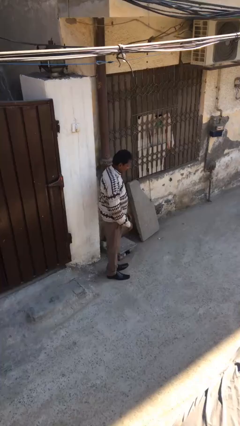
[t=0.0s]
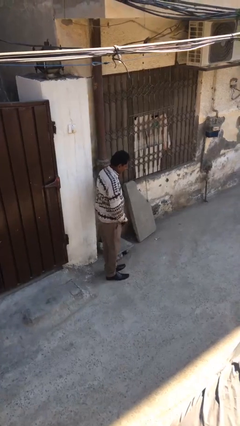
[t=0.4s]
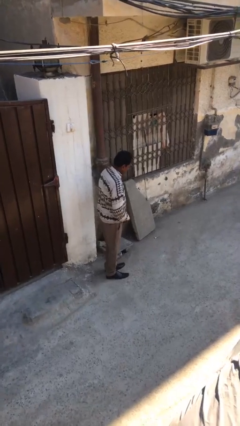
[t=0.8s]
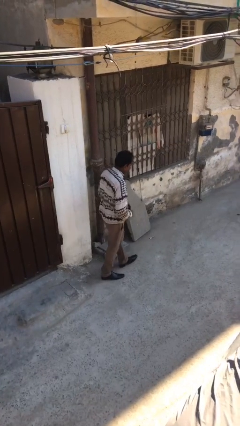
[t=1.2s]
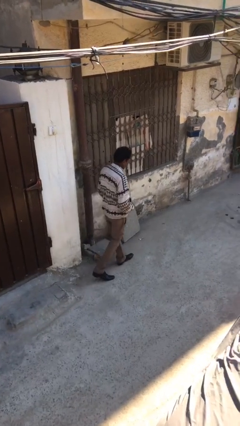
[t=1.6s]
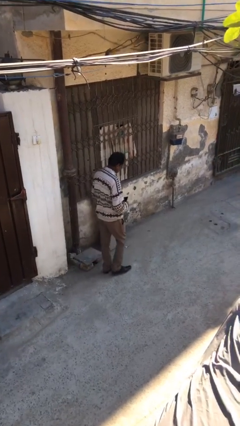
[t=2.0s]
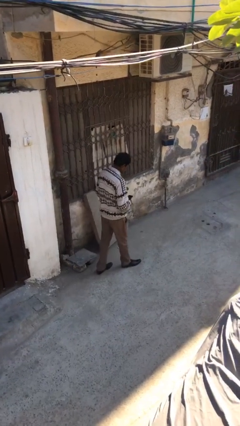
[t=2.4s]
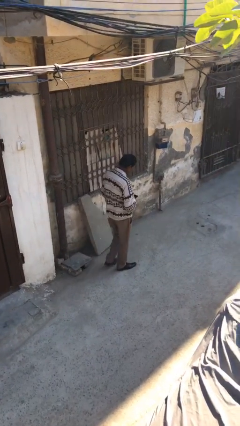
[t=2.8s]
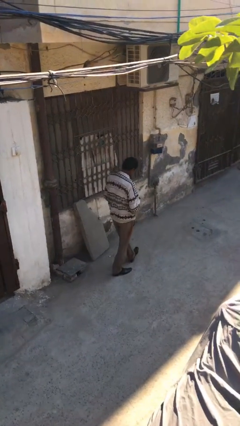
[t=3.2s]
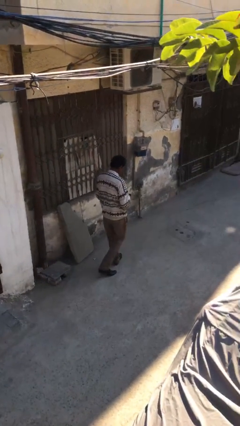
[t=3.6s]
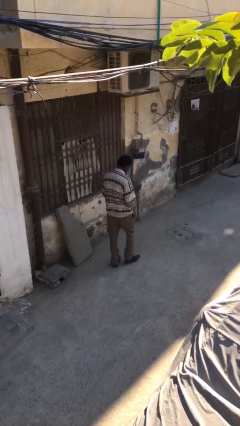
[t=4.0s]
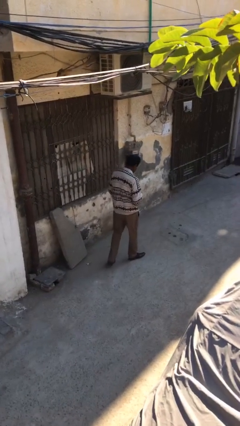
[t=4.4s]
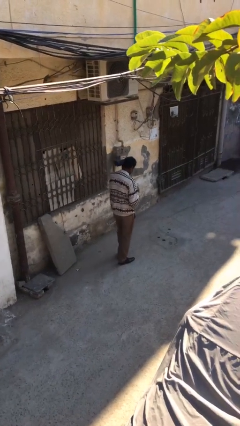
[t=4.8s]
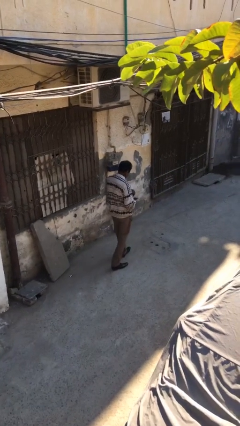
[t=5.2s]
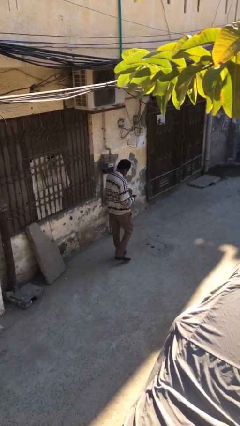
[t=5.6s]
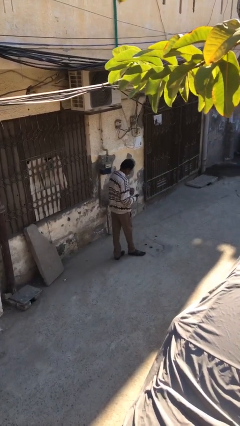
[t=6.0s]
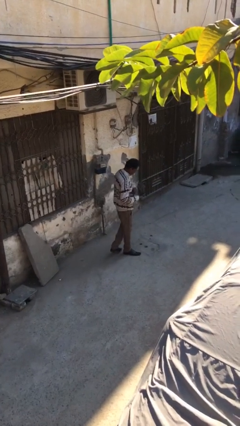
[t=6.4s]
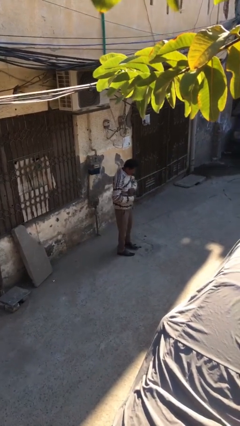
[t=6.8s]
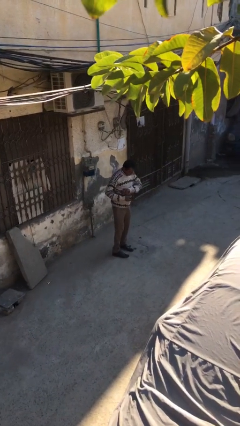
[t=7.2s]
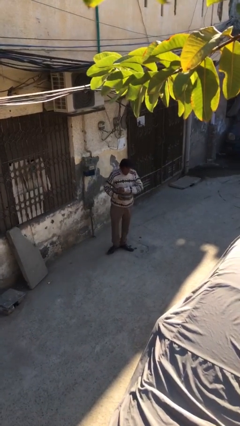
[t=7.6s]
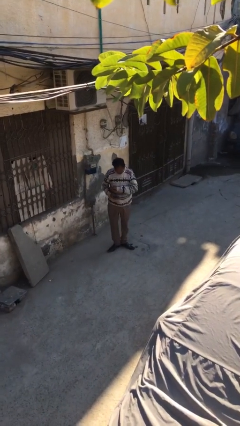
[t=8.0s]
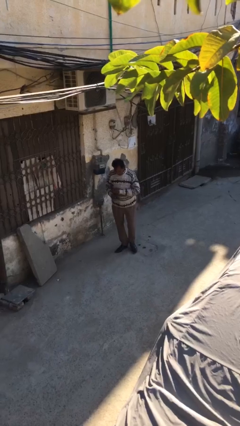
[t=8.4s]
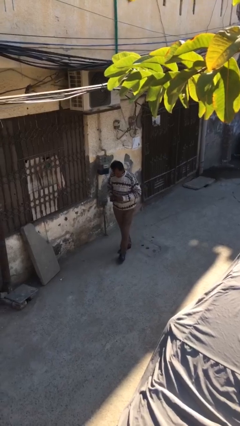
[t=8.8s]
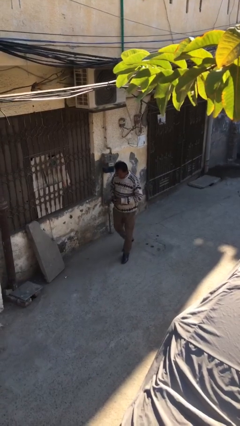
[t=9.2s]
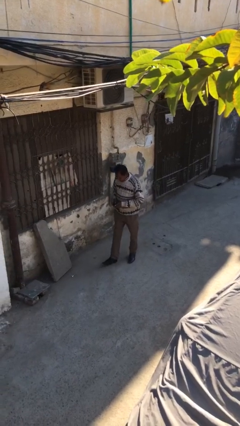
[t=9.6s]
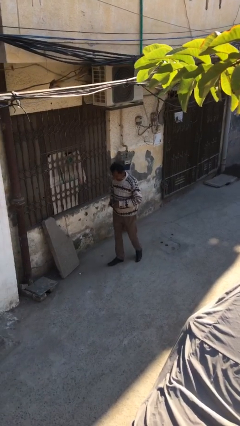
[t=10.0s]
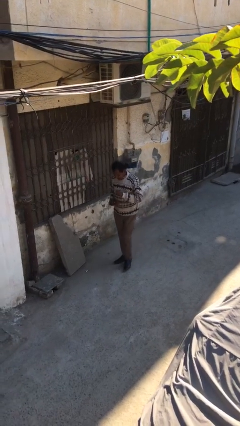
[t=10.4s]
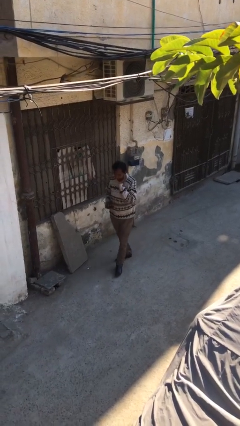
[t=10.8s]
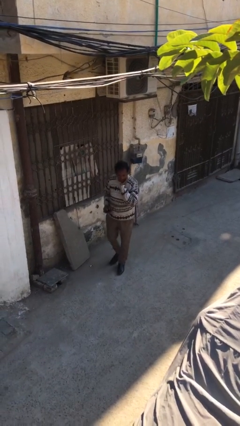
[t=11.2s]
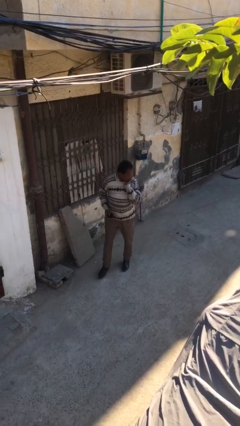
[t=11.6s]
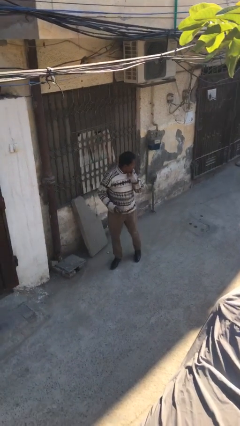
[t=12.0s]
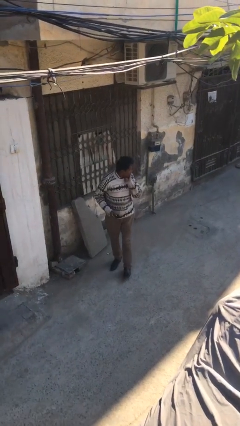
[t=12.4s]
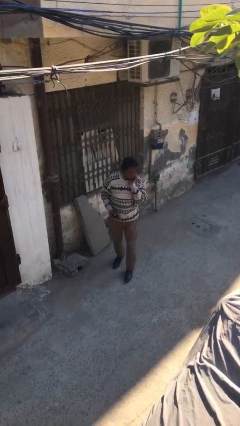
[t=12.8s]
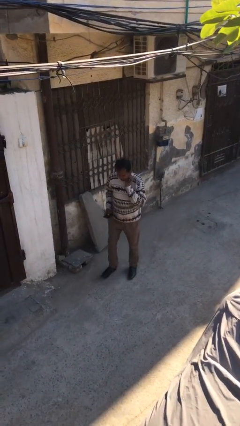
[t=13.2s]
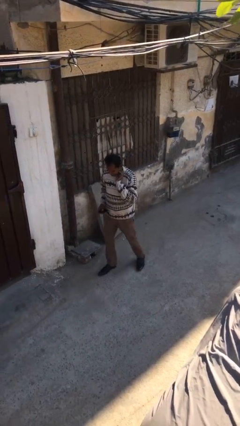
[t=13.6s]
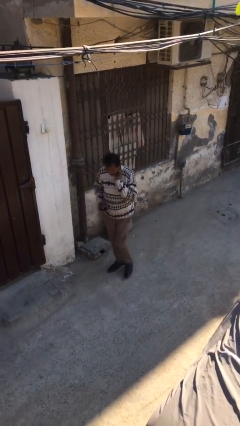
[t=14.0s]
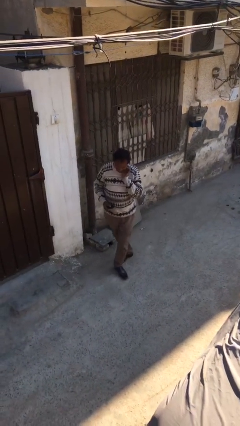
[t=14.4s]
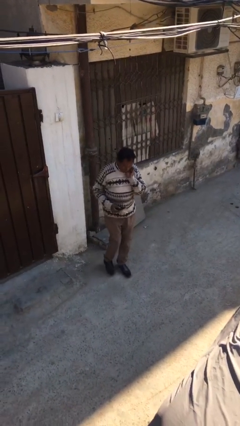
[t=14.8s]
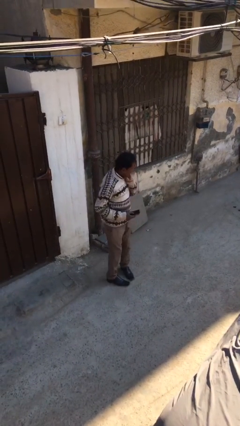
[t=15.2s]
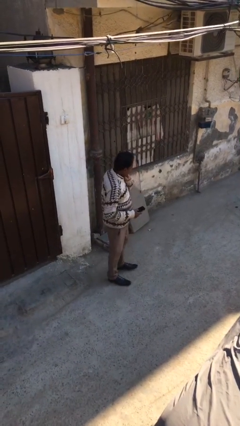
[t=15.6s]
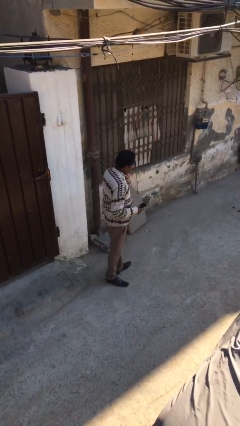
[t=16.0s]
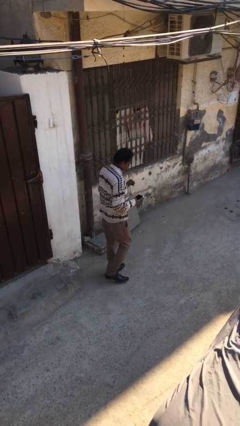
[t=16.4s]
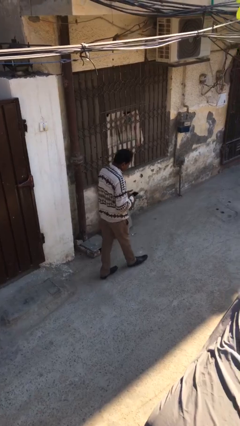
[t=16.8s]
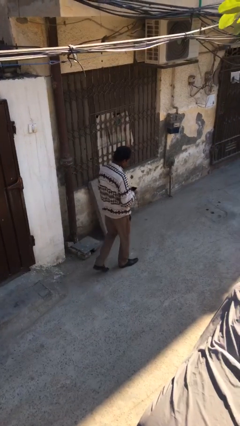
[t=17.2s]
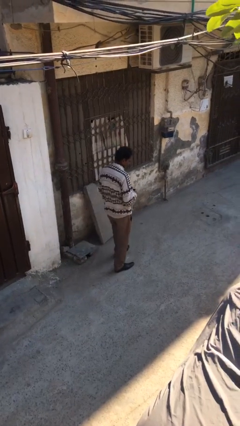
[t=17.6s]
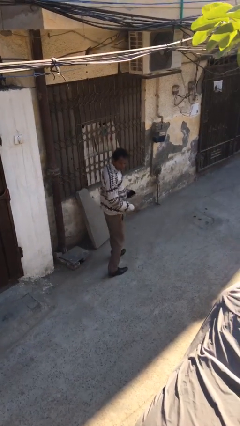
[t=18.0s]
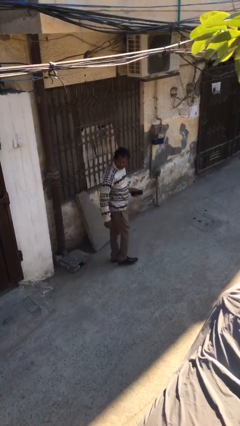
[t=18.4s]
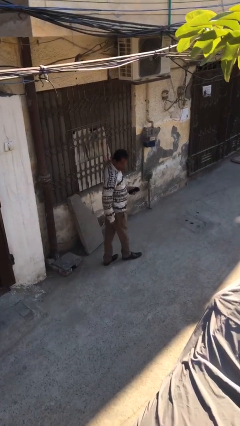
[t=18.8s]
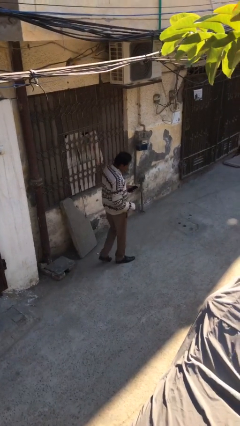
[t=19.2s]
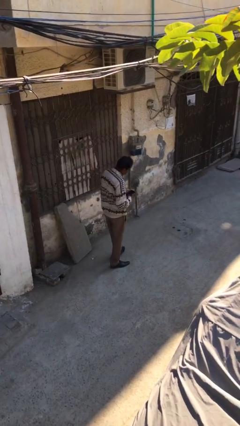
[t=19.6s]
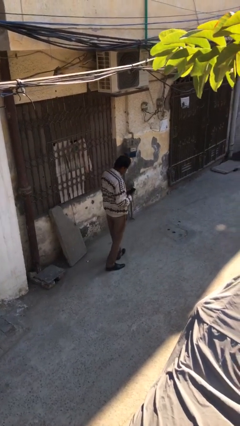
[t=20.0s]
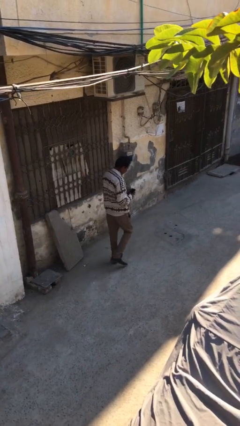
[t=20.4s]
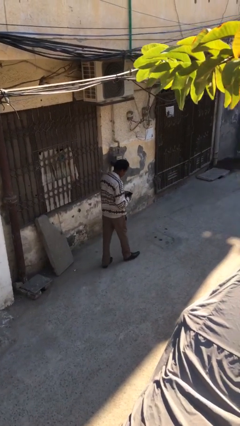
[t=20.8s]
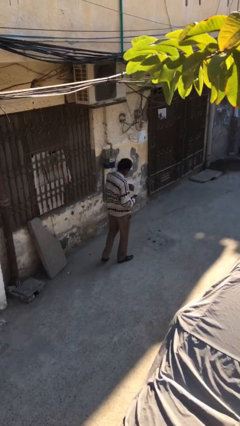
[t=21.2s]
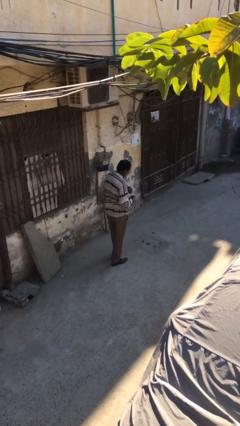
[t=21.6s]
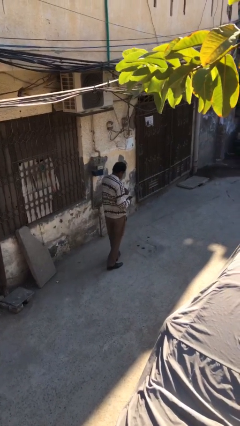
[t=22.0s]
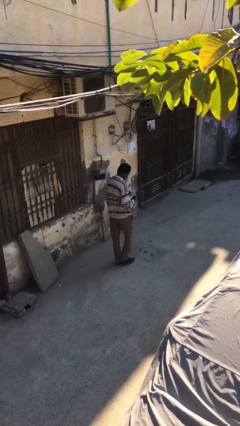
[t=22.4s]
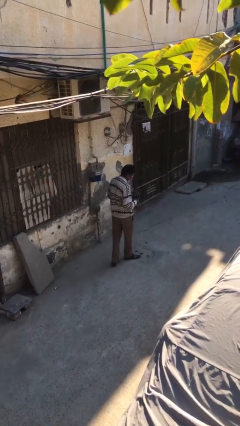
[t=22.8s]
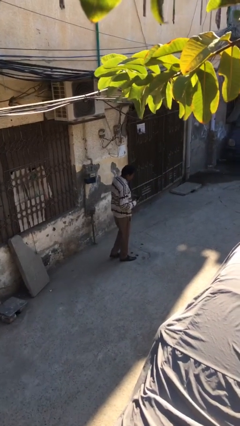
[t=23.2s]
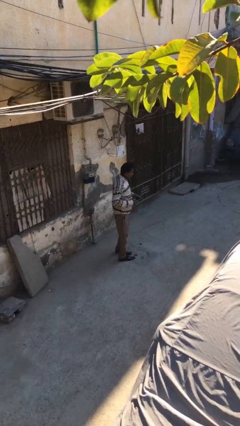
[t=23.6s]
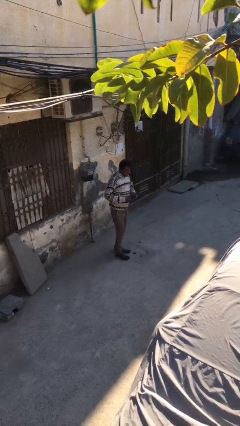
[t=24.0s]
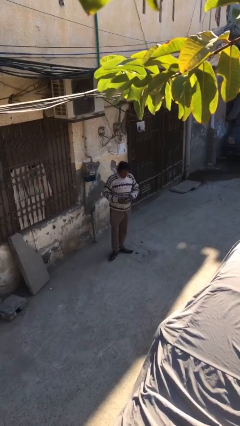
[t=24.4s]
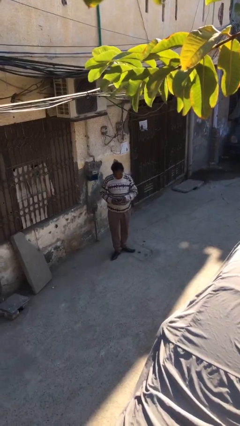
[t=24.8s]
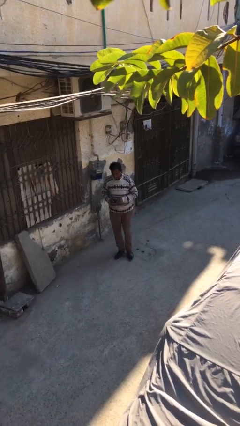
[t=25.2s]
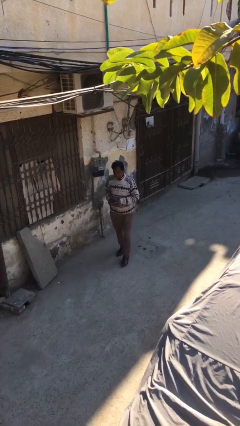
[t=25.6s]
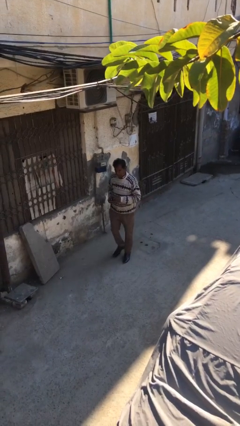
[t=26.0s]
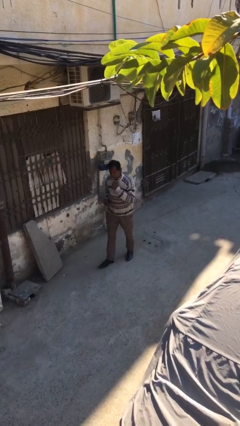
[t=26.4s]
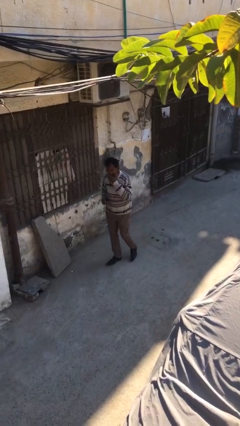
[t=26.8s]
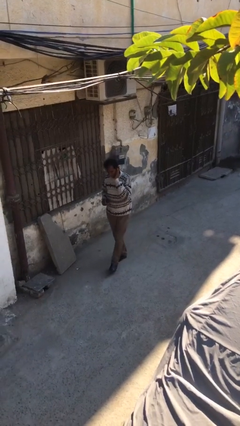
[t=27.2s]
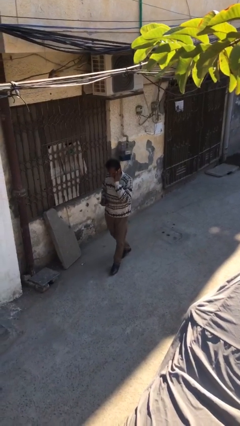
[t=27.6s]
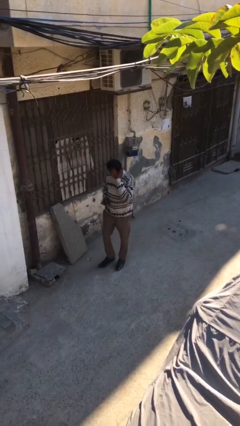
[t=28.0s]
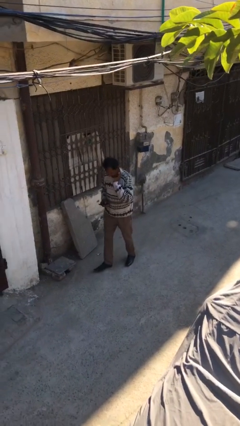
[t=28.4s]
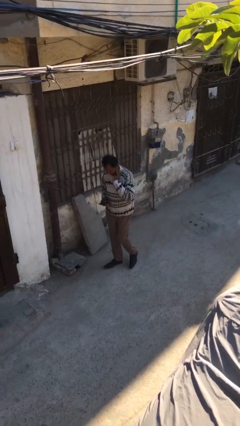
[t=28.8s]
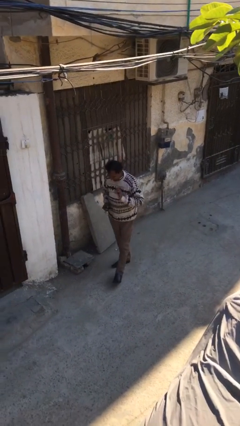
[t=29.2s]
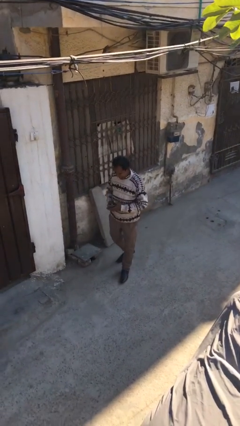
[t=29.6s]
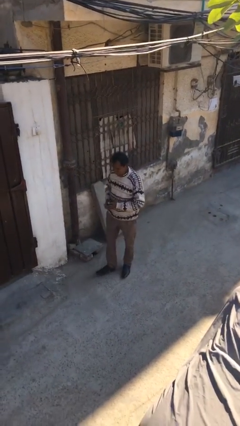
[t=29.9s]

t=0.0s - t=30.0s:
person walks

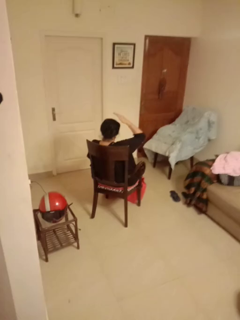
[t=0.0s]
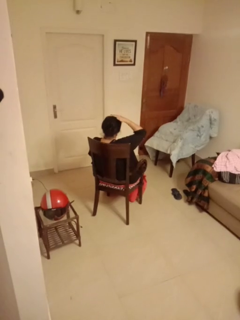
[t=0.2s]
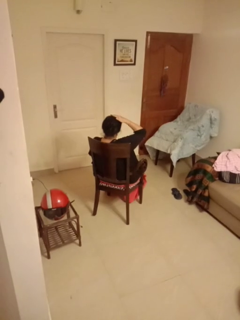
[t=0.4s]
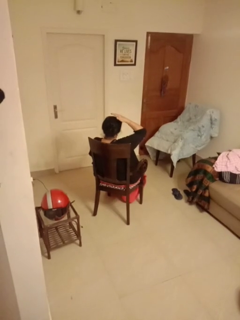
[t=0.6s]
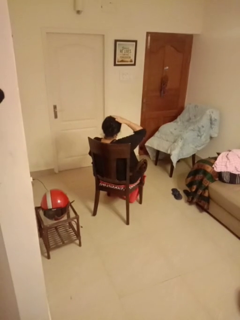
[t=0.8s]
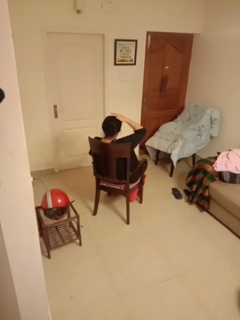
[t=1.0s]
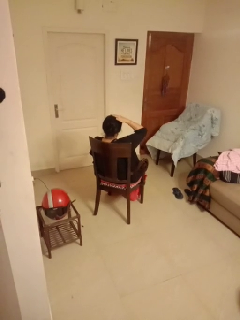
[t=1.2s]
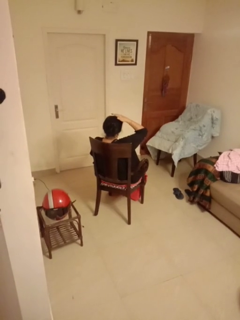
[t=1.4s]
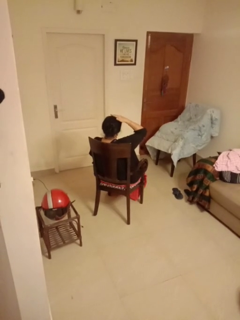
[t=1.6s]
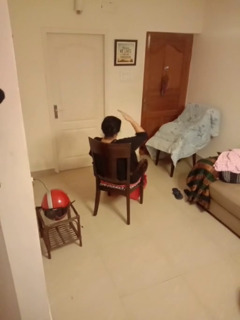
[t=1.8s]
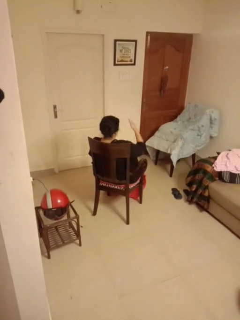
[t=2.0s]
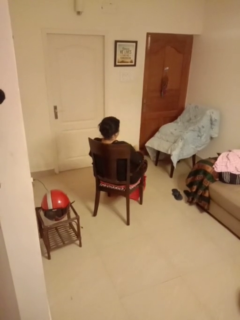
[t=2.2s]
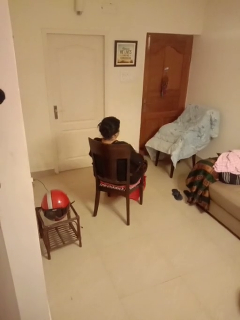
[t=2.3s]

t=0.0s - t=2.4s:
person pats head

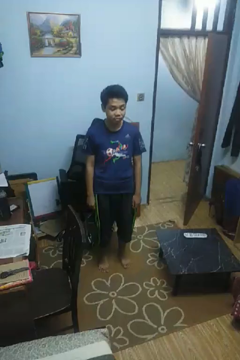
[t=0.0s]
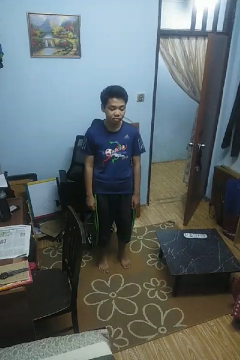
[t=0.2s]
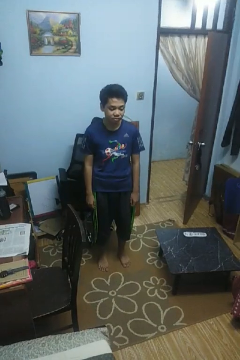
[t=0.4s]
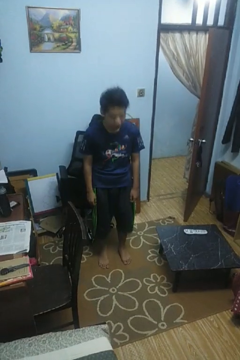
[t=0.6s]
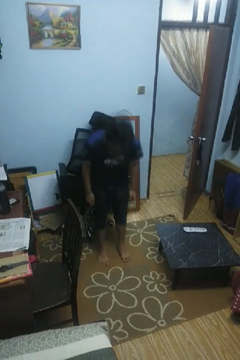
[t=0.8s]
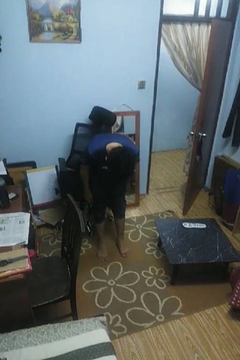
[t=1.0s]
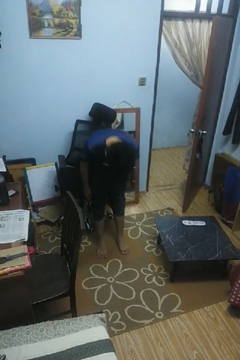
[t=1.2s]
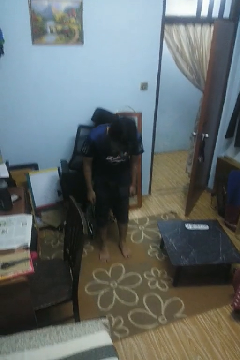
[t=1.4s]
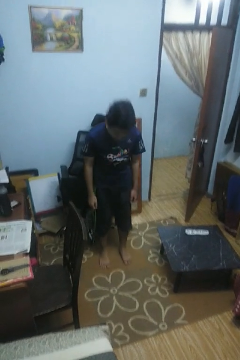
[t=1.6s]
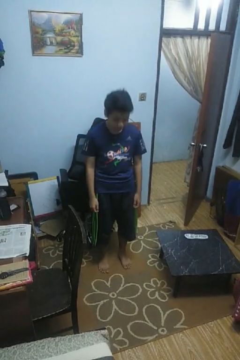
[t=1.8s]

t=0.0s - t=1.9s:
person bows
